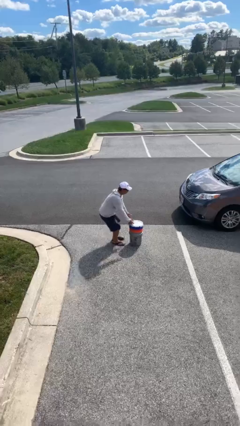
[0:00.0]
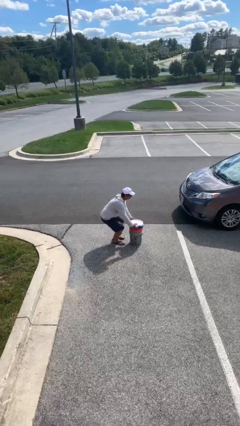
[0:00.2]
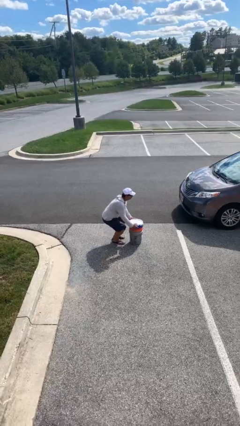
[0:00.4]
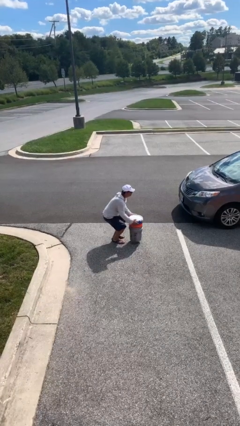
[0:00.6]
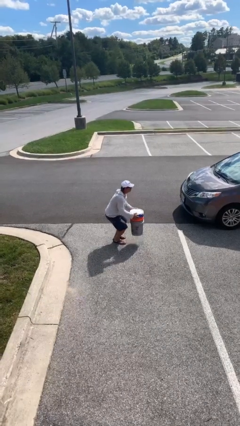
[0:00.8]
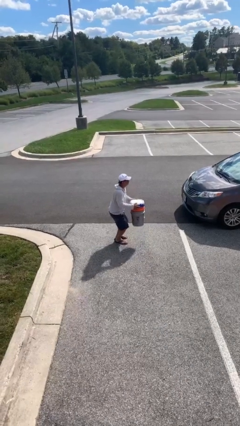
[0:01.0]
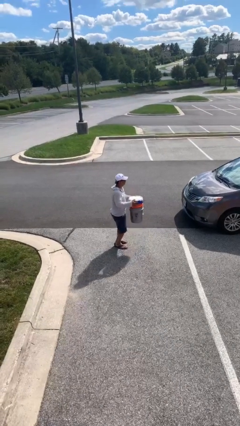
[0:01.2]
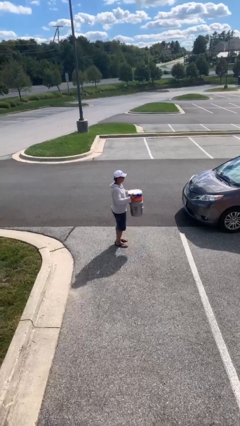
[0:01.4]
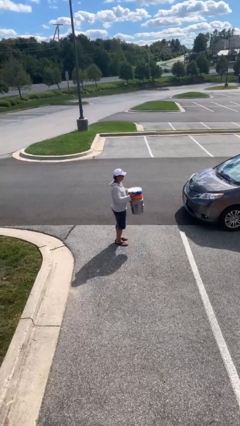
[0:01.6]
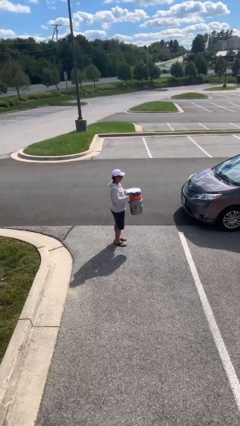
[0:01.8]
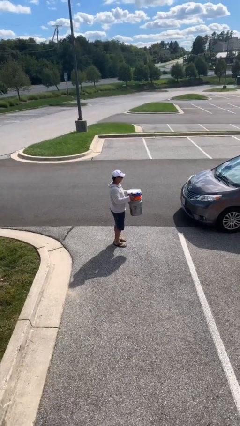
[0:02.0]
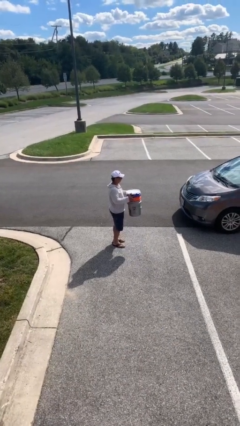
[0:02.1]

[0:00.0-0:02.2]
person picks up object from floor

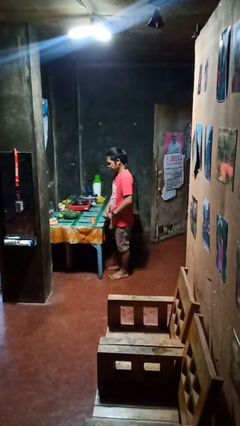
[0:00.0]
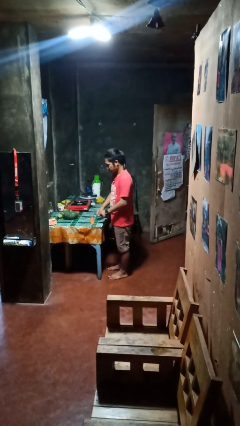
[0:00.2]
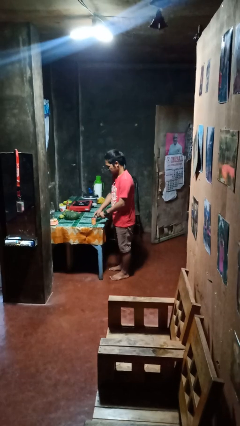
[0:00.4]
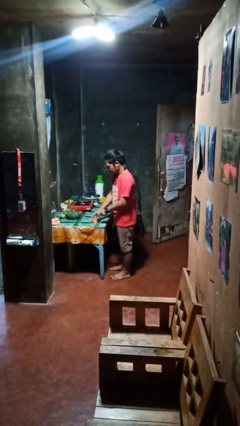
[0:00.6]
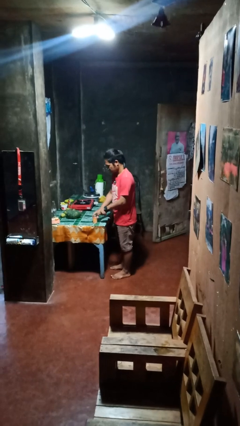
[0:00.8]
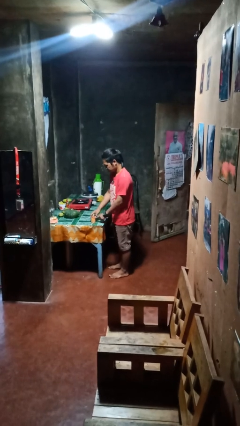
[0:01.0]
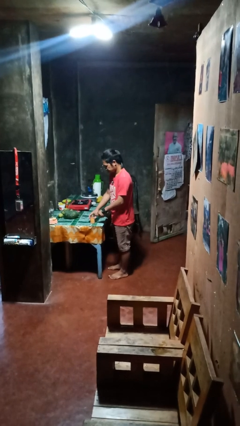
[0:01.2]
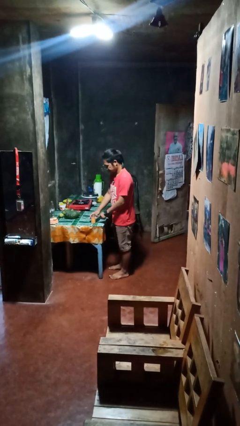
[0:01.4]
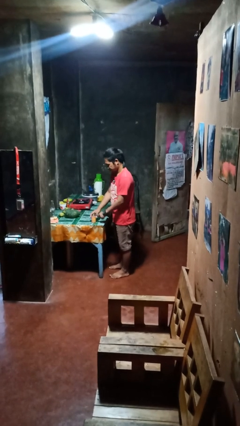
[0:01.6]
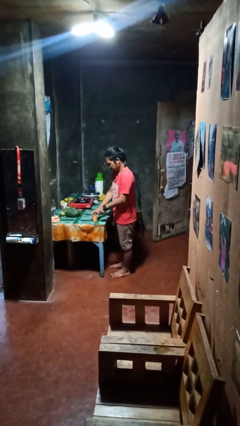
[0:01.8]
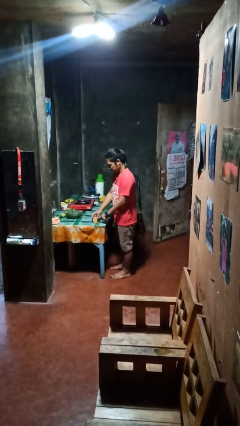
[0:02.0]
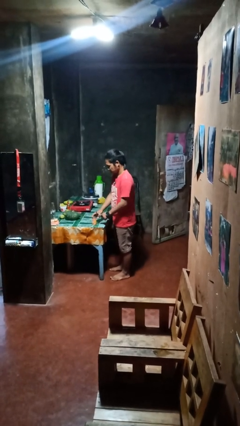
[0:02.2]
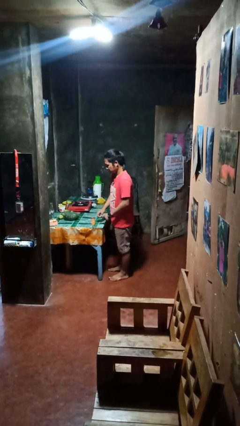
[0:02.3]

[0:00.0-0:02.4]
person opens can with can opener

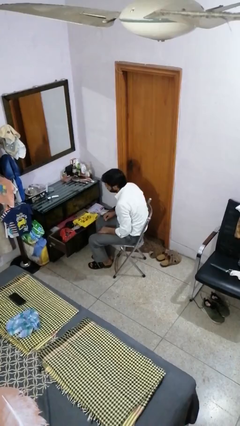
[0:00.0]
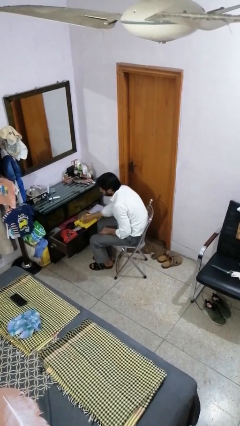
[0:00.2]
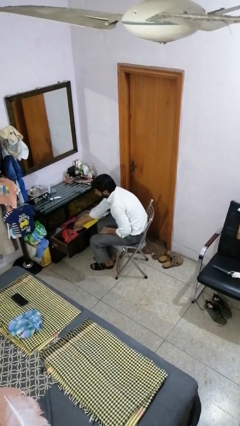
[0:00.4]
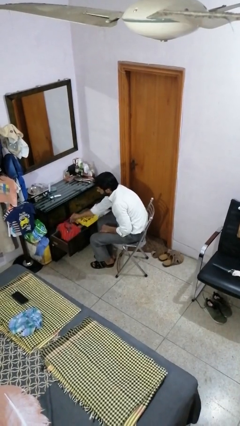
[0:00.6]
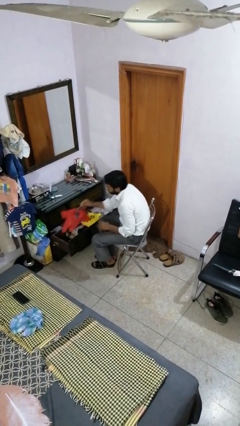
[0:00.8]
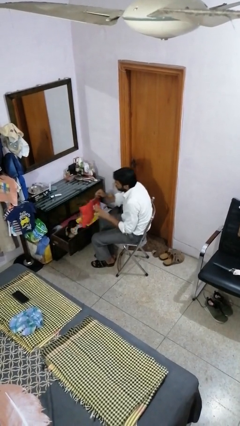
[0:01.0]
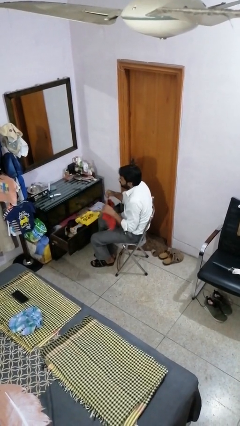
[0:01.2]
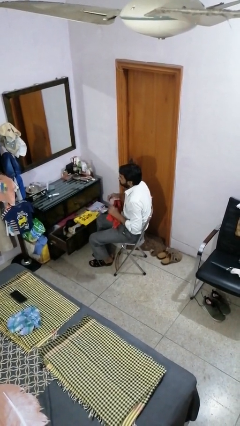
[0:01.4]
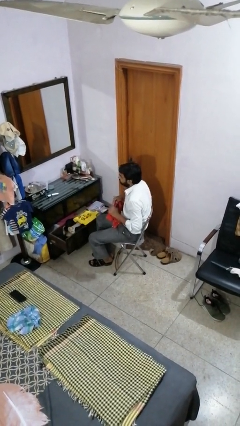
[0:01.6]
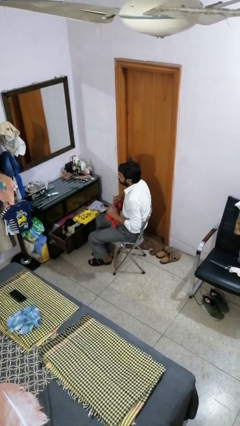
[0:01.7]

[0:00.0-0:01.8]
person takes clothes from dresser

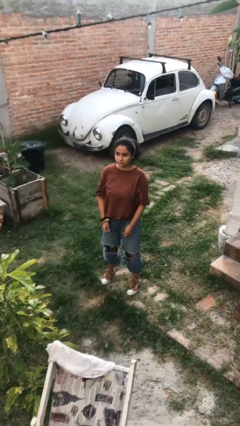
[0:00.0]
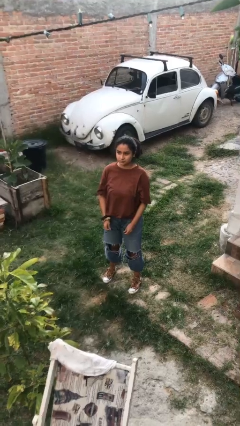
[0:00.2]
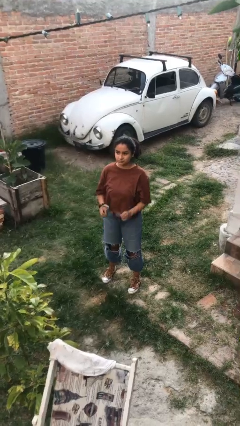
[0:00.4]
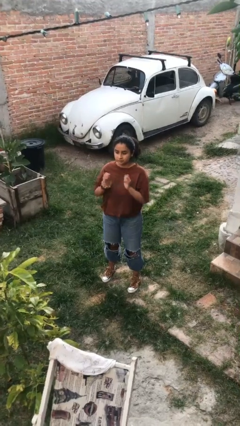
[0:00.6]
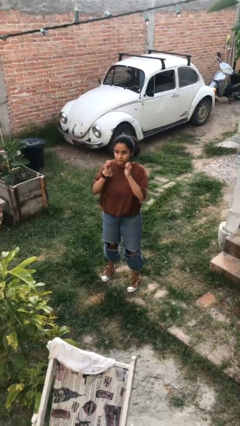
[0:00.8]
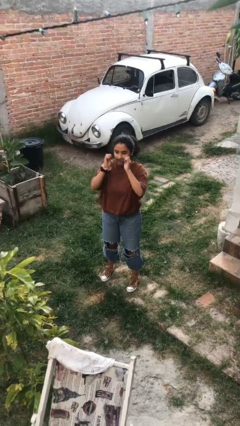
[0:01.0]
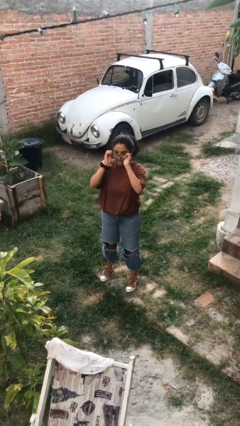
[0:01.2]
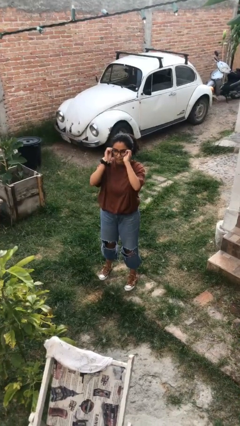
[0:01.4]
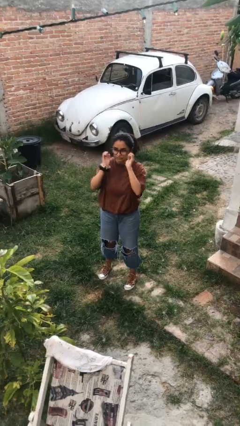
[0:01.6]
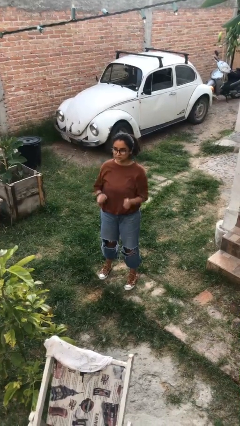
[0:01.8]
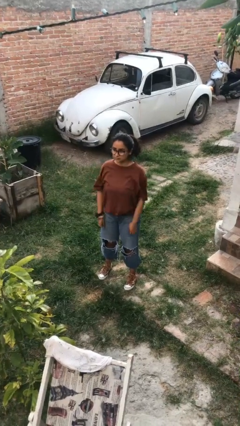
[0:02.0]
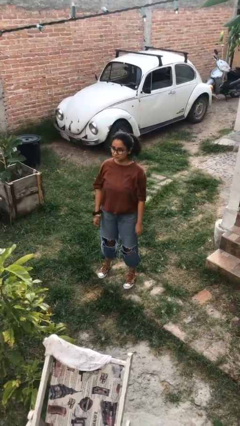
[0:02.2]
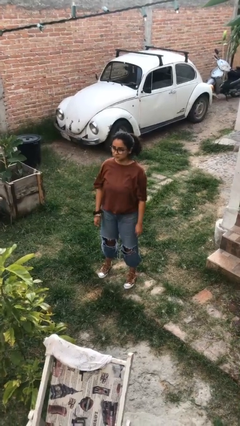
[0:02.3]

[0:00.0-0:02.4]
person puts on glasses

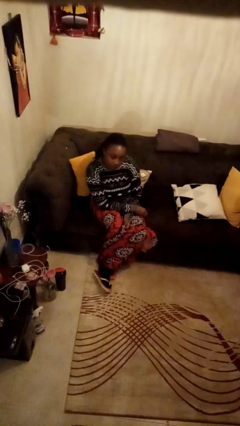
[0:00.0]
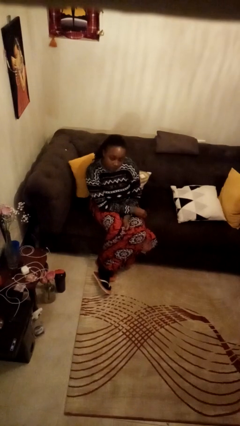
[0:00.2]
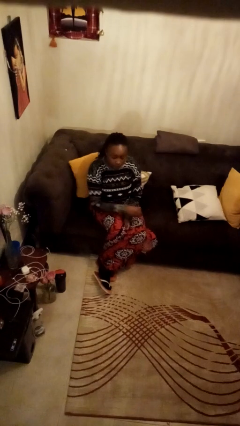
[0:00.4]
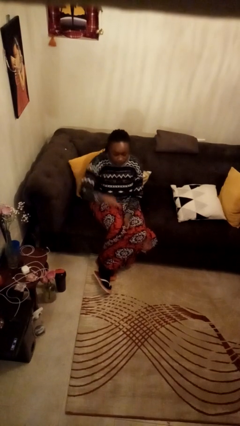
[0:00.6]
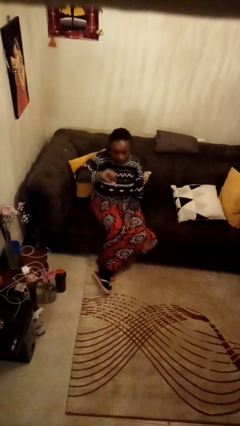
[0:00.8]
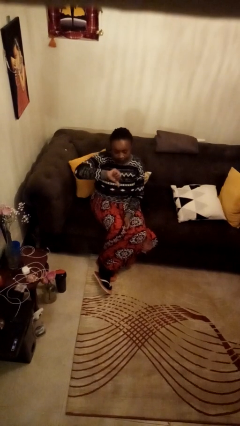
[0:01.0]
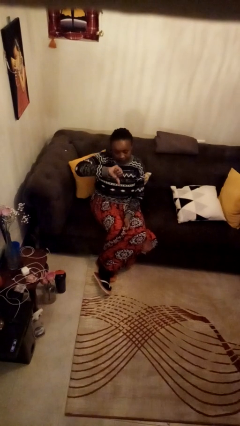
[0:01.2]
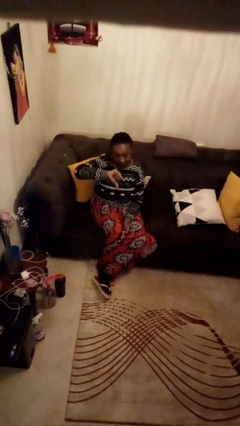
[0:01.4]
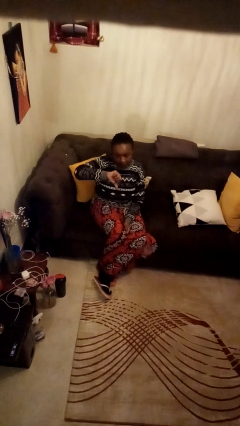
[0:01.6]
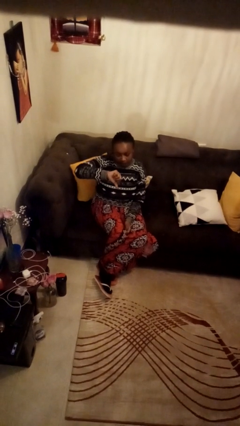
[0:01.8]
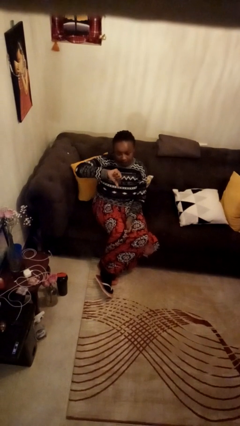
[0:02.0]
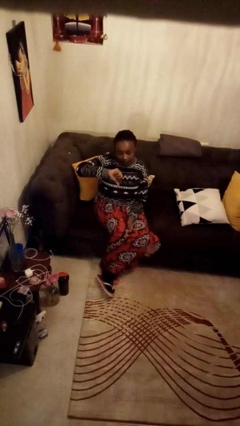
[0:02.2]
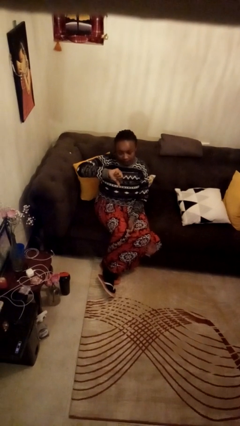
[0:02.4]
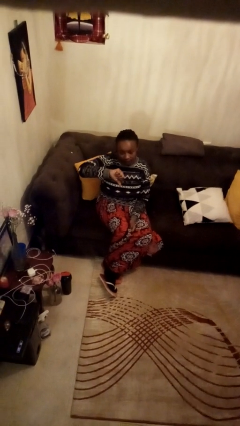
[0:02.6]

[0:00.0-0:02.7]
person gestures thumbs down

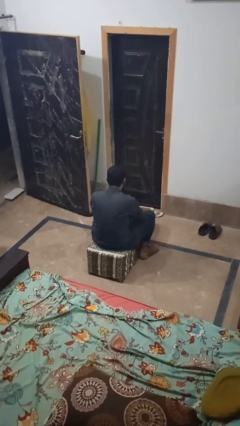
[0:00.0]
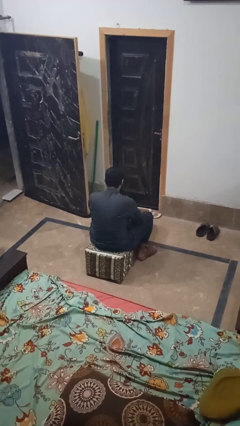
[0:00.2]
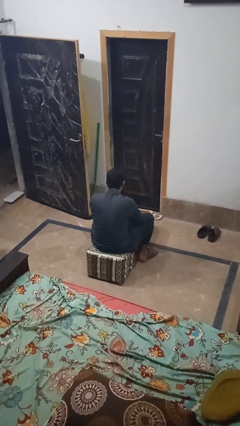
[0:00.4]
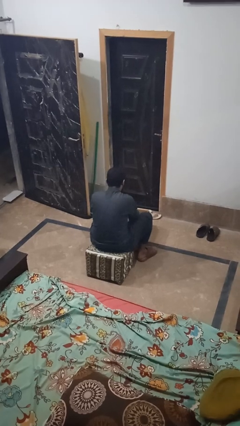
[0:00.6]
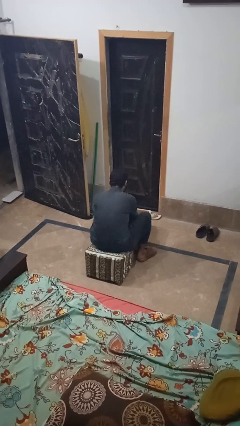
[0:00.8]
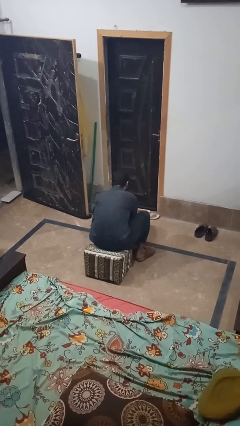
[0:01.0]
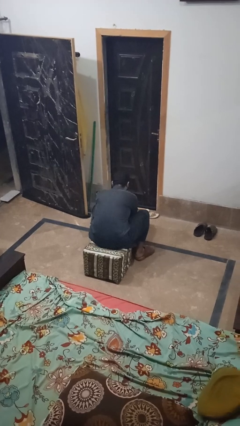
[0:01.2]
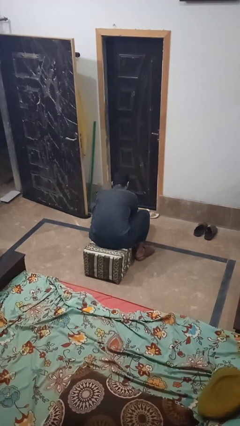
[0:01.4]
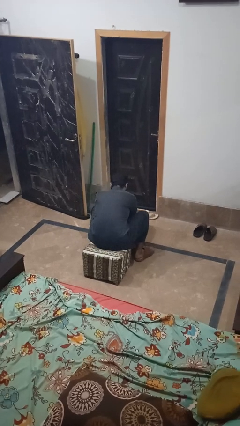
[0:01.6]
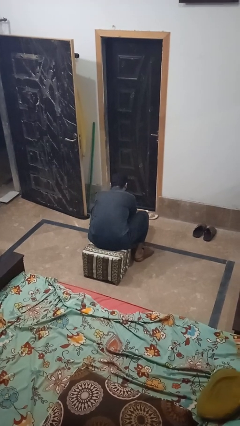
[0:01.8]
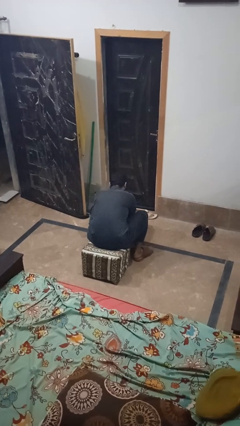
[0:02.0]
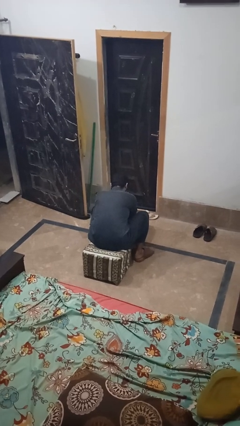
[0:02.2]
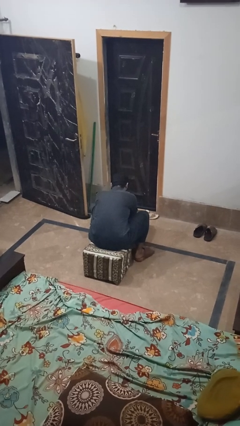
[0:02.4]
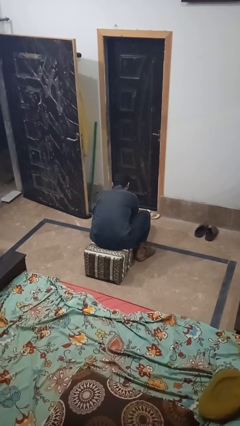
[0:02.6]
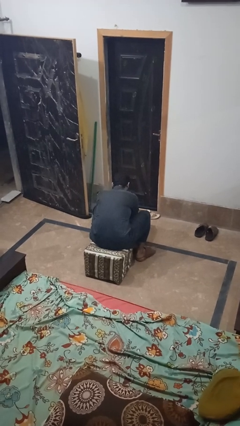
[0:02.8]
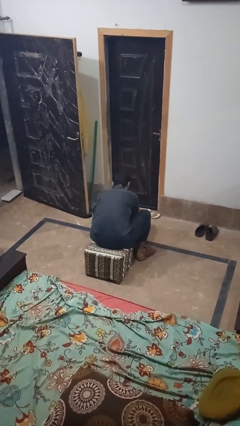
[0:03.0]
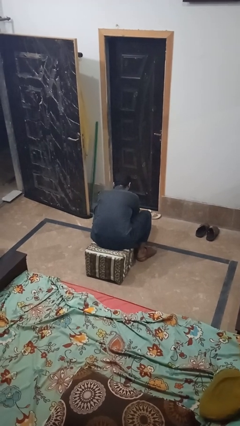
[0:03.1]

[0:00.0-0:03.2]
person searches in box

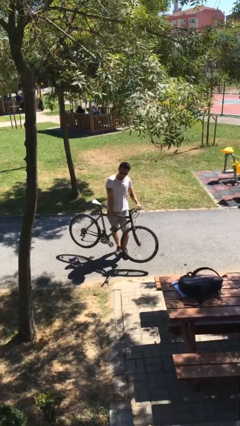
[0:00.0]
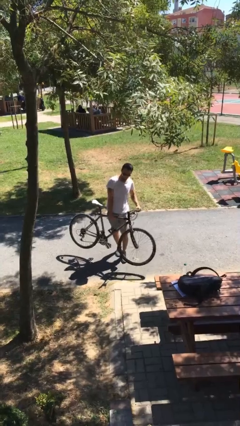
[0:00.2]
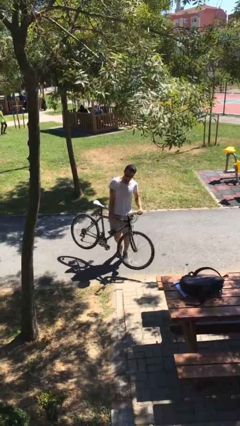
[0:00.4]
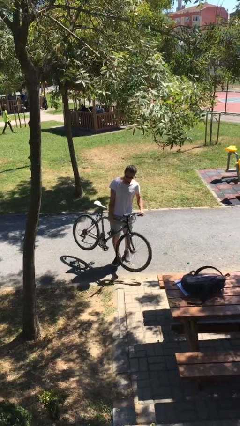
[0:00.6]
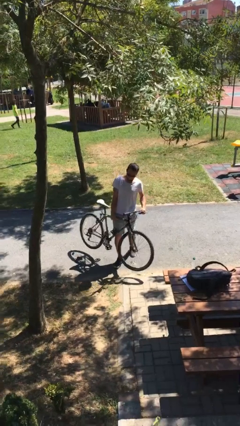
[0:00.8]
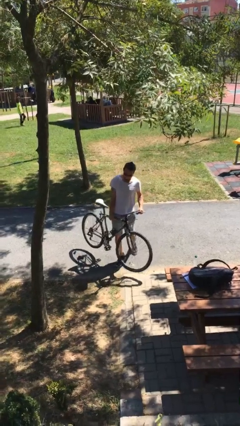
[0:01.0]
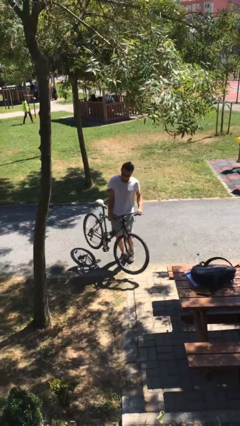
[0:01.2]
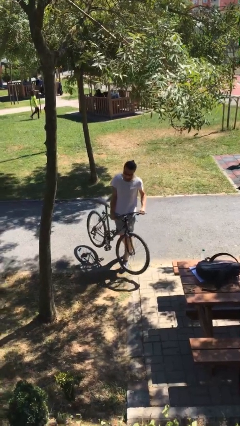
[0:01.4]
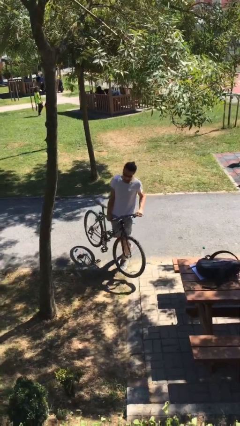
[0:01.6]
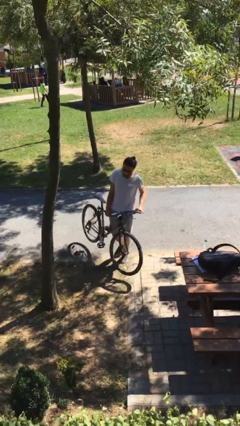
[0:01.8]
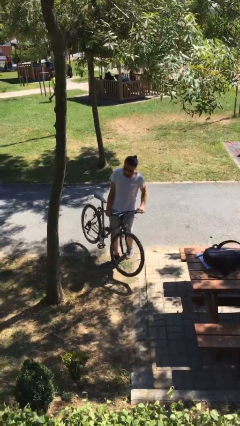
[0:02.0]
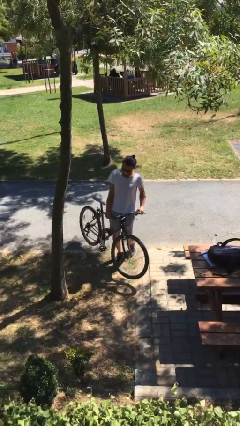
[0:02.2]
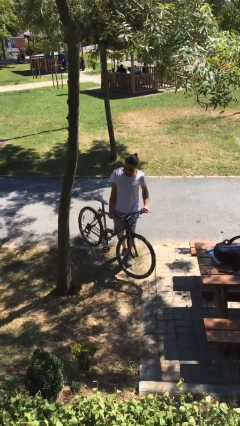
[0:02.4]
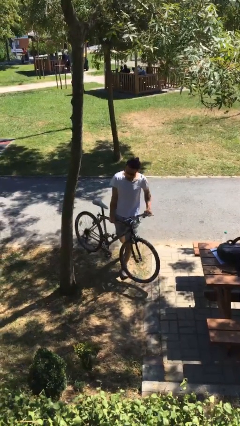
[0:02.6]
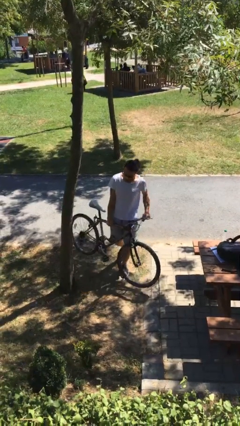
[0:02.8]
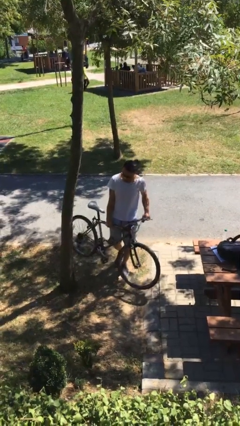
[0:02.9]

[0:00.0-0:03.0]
person carries heavy object
